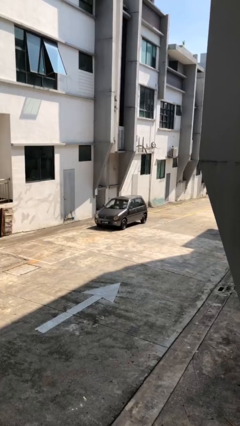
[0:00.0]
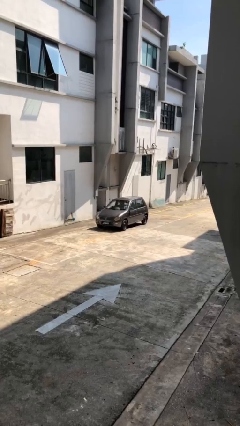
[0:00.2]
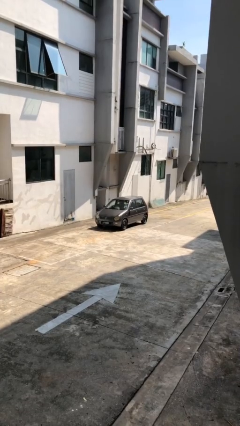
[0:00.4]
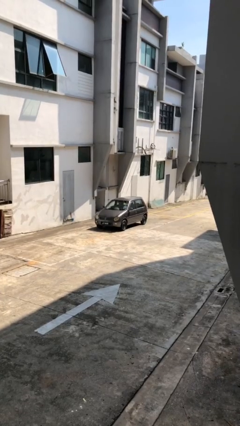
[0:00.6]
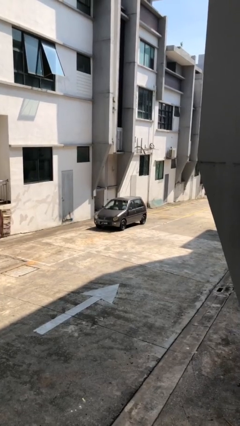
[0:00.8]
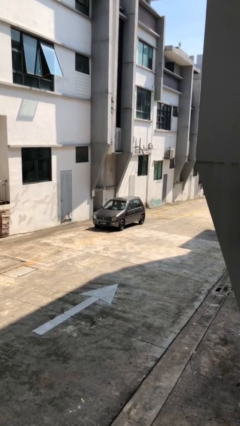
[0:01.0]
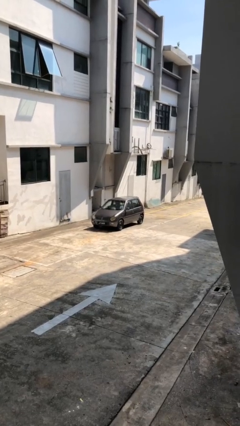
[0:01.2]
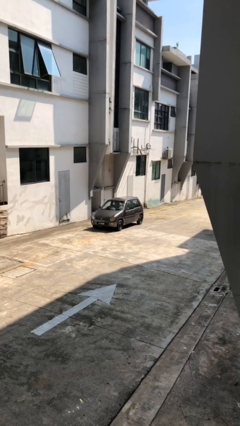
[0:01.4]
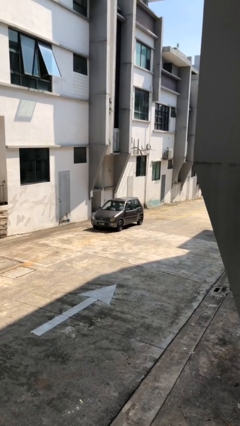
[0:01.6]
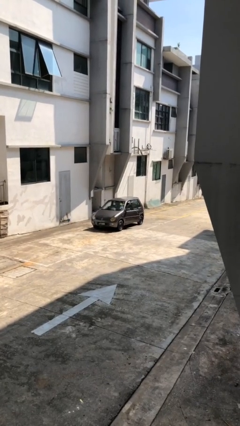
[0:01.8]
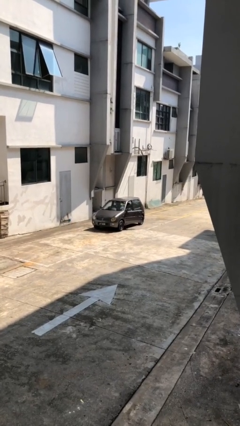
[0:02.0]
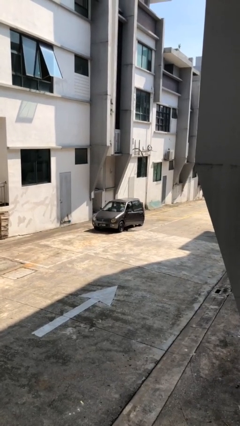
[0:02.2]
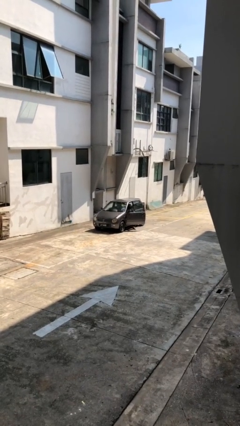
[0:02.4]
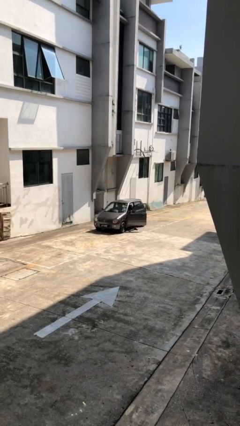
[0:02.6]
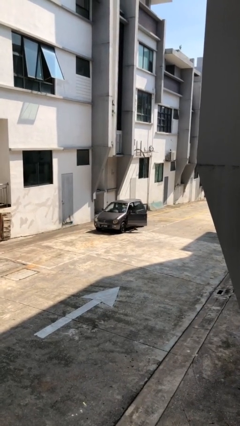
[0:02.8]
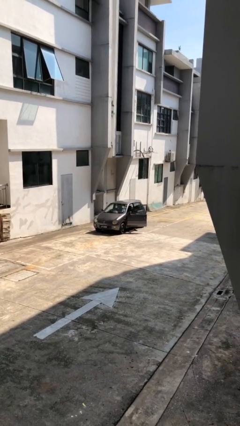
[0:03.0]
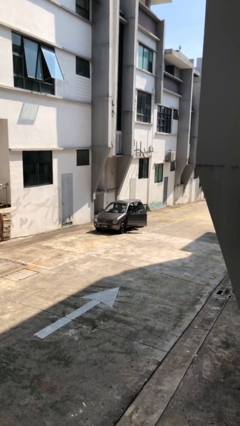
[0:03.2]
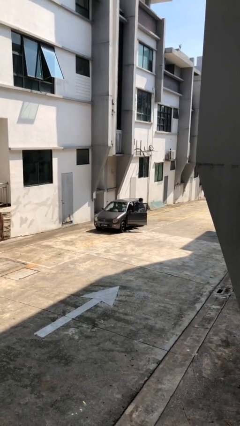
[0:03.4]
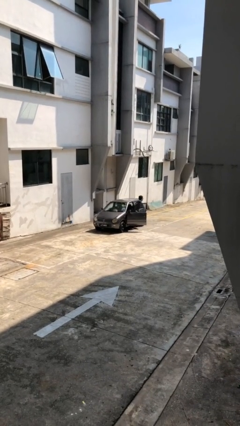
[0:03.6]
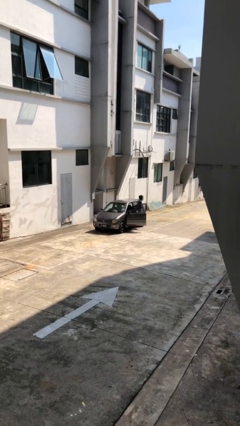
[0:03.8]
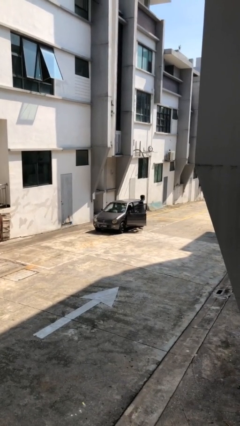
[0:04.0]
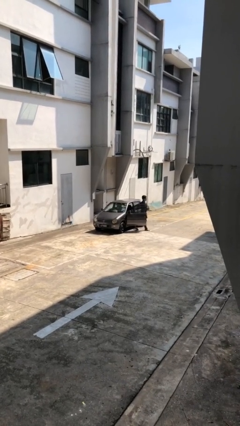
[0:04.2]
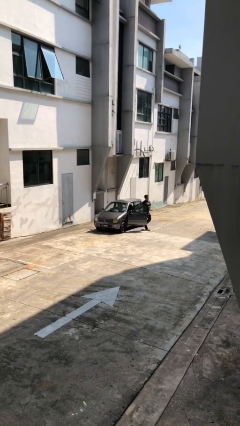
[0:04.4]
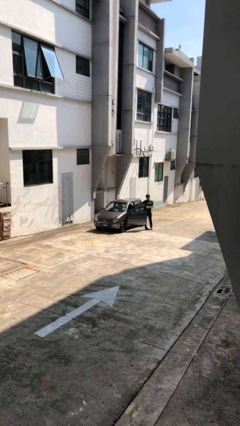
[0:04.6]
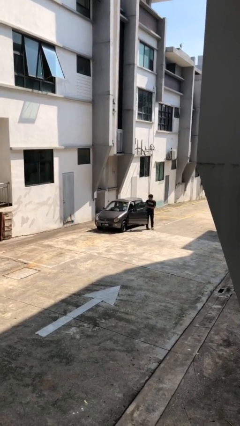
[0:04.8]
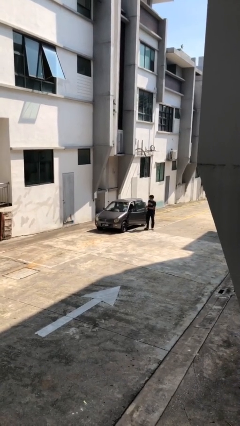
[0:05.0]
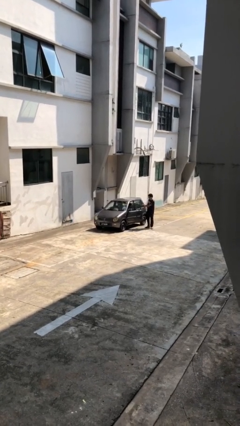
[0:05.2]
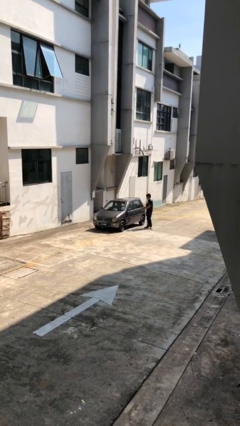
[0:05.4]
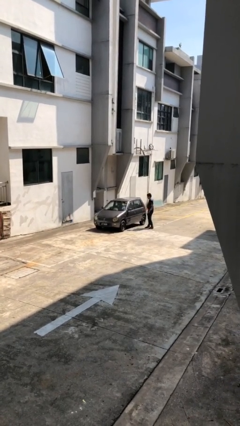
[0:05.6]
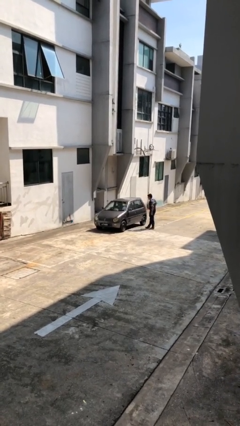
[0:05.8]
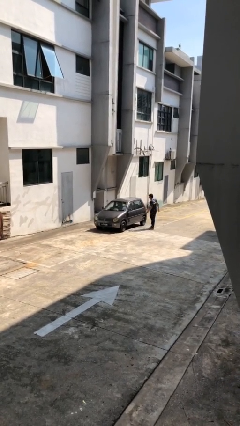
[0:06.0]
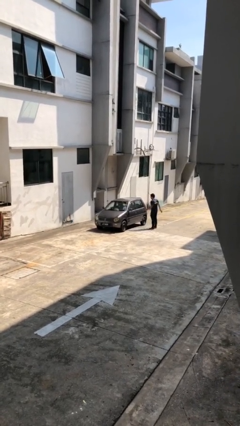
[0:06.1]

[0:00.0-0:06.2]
car drops off person

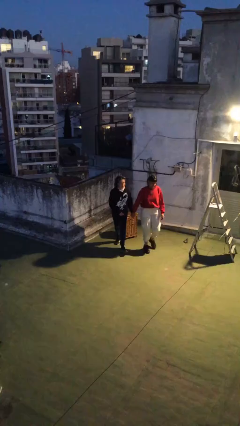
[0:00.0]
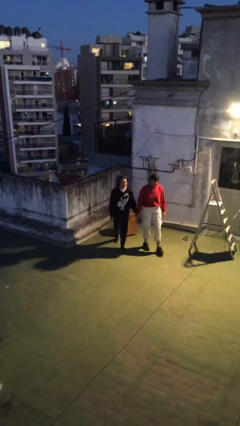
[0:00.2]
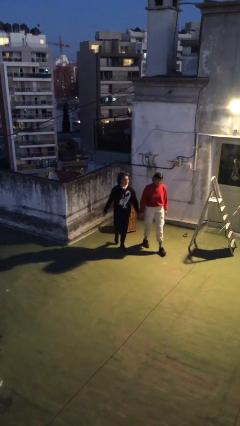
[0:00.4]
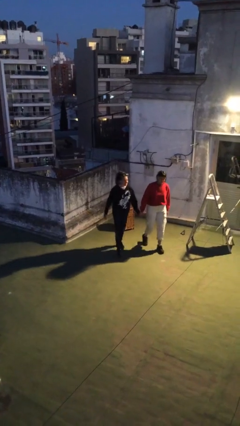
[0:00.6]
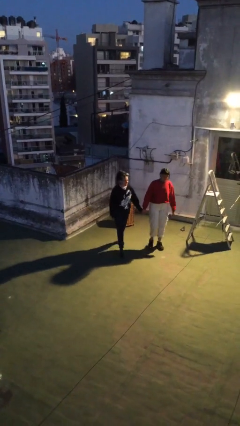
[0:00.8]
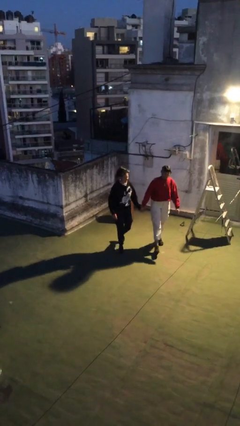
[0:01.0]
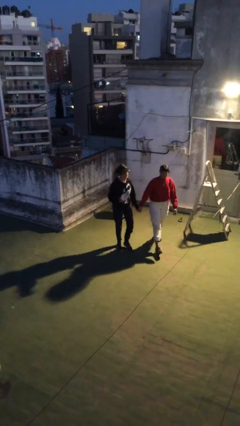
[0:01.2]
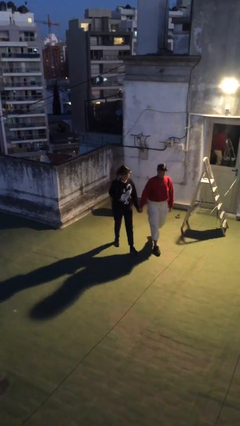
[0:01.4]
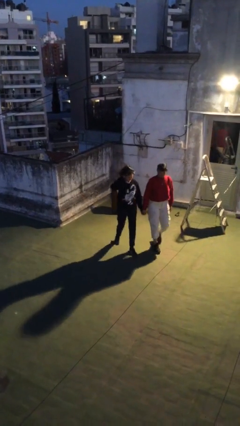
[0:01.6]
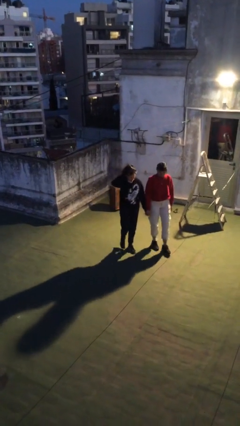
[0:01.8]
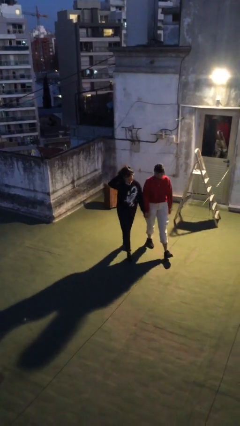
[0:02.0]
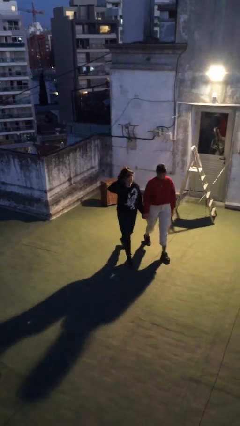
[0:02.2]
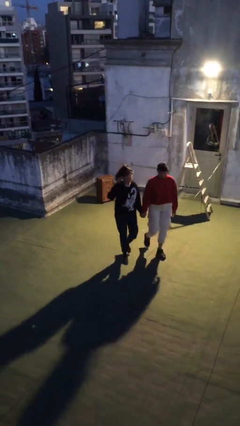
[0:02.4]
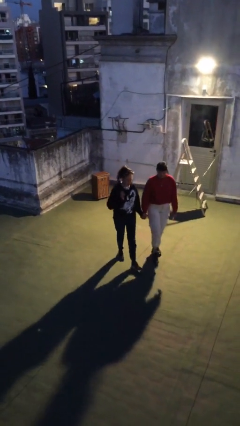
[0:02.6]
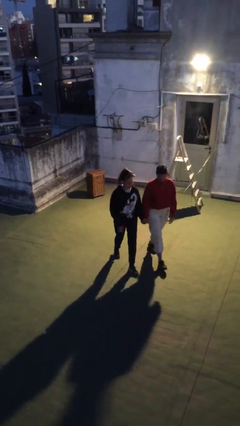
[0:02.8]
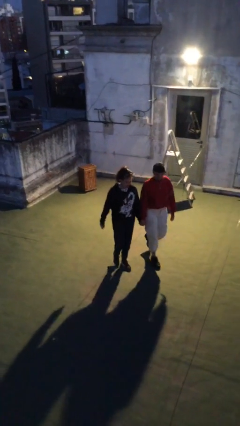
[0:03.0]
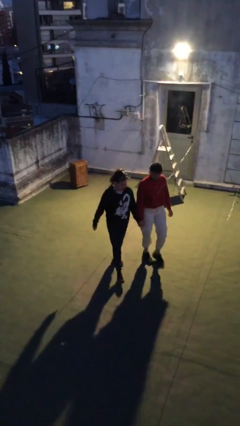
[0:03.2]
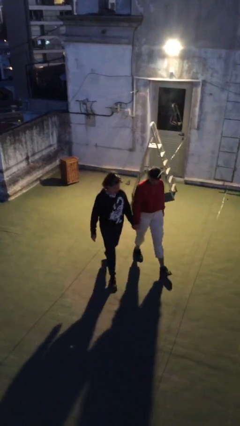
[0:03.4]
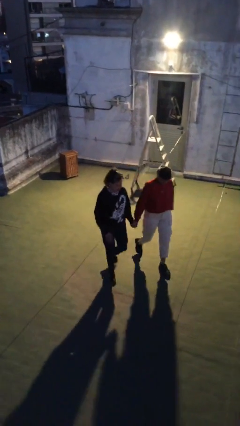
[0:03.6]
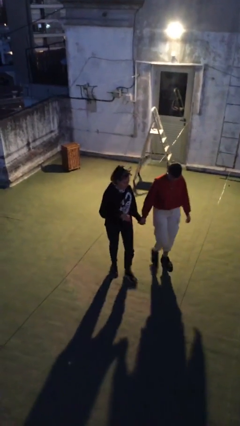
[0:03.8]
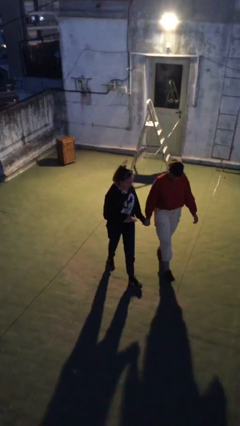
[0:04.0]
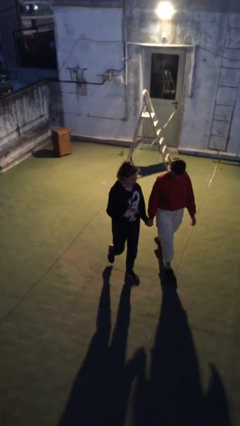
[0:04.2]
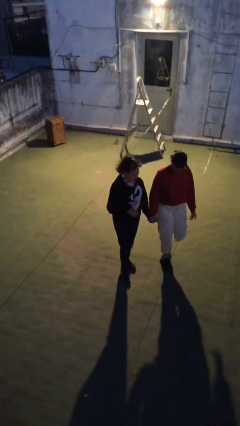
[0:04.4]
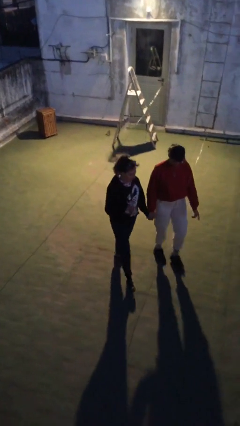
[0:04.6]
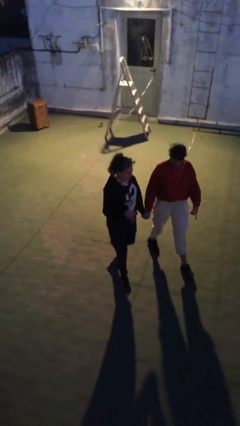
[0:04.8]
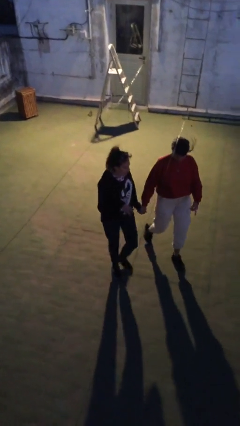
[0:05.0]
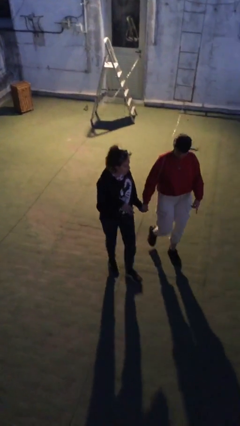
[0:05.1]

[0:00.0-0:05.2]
person holds hand

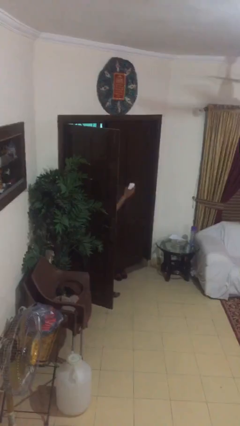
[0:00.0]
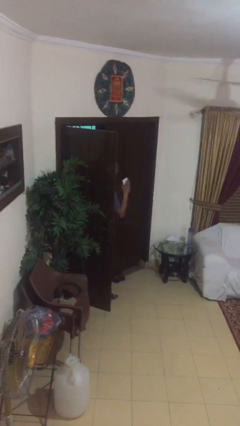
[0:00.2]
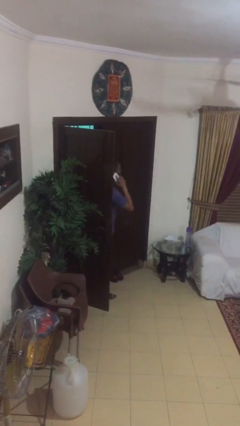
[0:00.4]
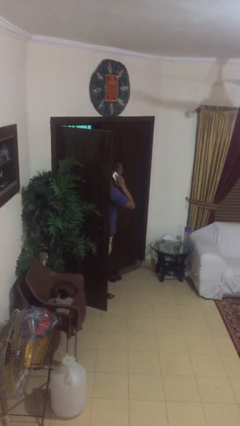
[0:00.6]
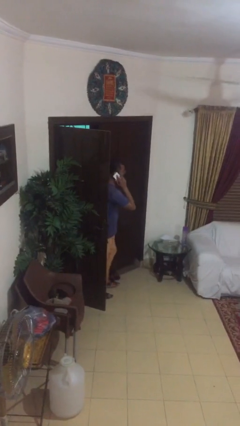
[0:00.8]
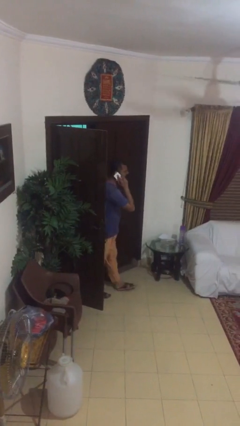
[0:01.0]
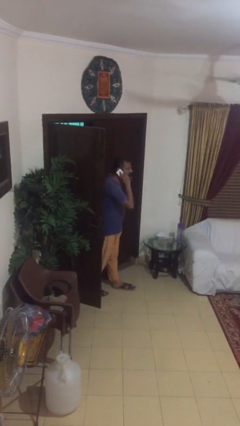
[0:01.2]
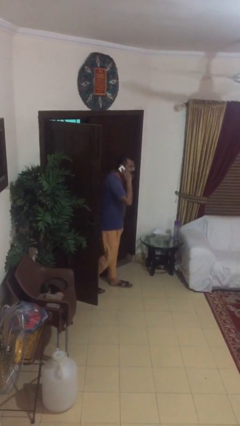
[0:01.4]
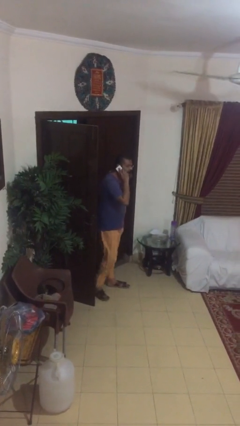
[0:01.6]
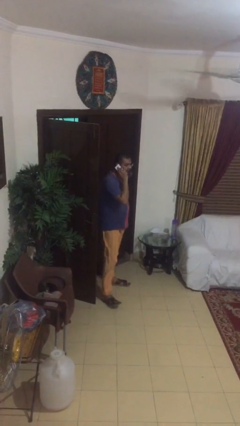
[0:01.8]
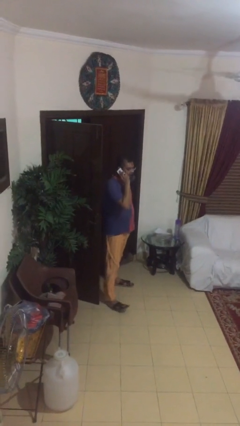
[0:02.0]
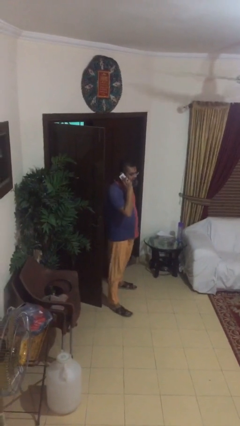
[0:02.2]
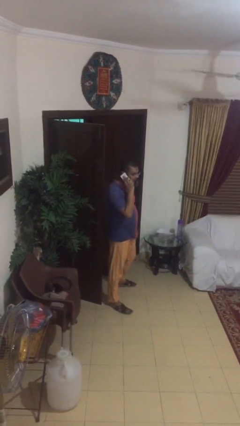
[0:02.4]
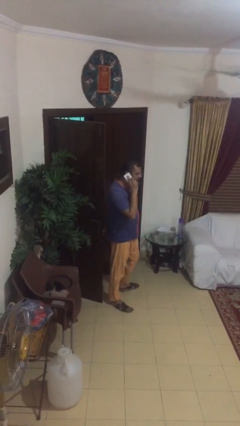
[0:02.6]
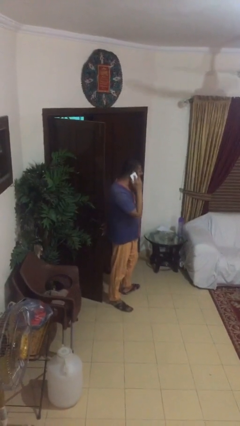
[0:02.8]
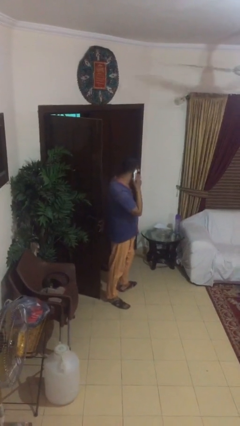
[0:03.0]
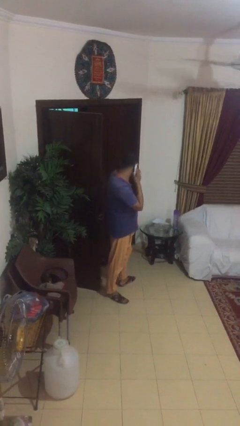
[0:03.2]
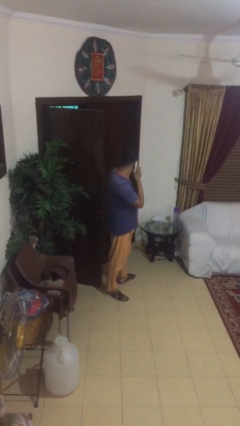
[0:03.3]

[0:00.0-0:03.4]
person enters scene through structure

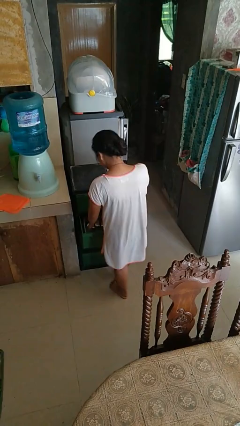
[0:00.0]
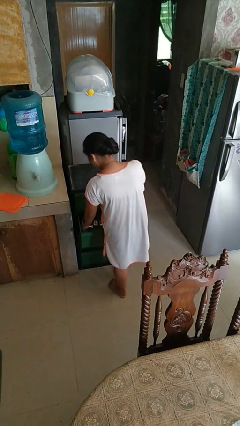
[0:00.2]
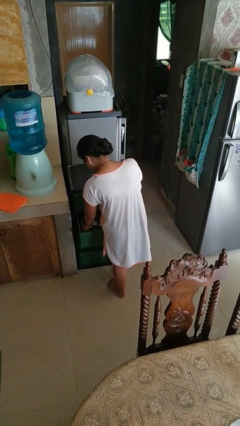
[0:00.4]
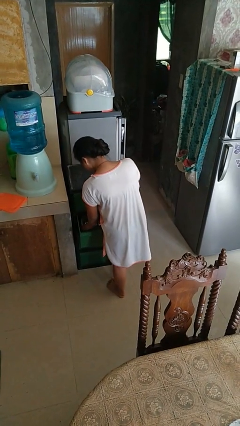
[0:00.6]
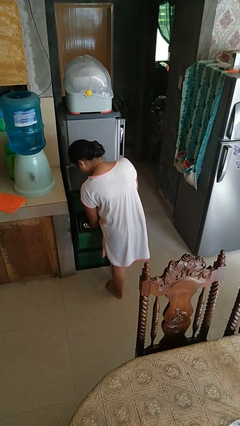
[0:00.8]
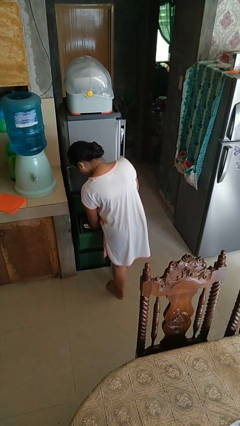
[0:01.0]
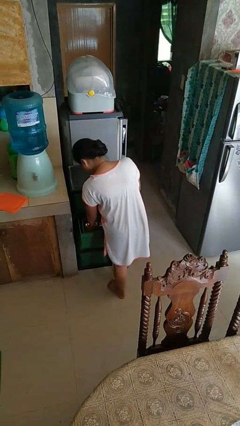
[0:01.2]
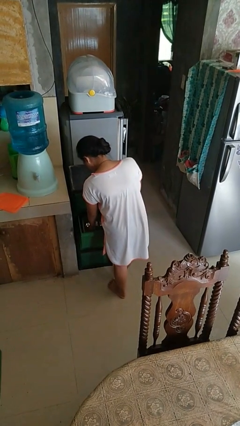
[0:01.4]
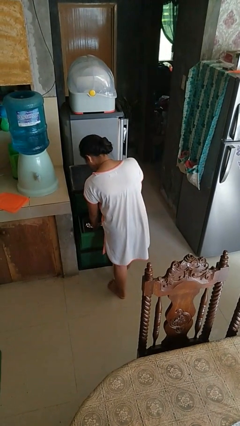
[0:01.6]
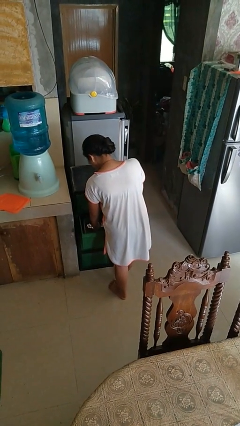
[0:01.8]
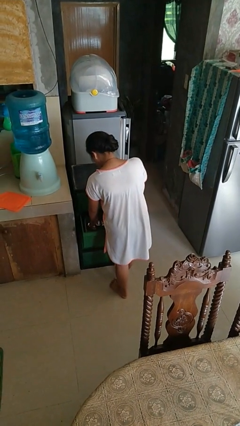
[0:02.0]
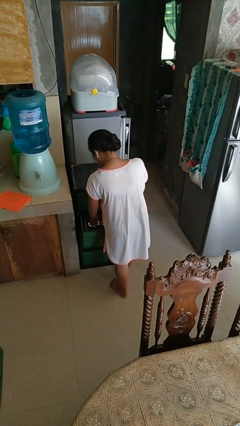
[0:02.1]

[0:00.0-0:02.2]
person searches in kitchen drawer

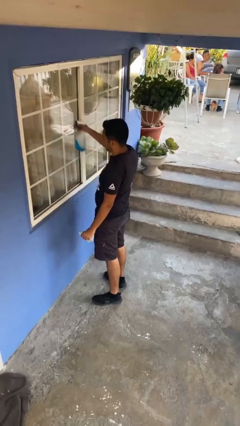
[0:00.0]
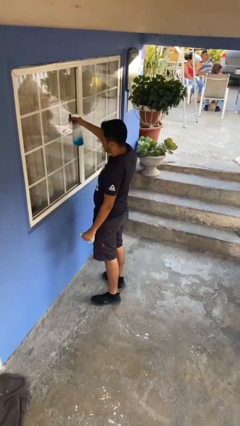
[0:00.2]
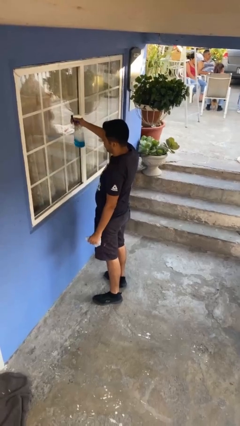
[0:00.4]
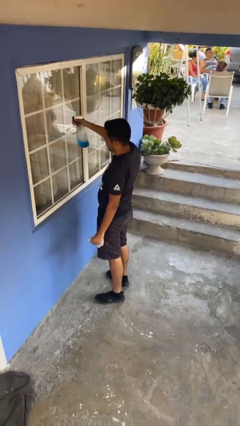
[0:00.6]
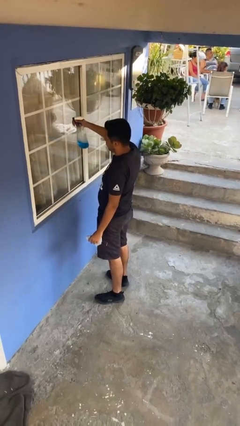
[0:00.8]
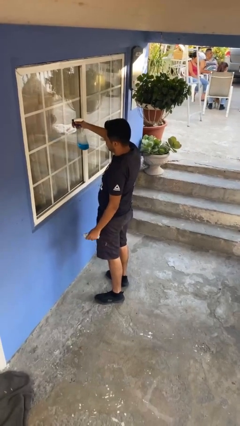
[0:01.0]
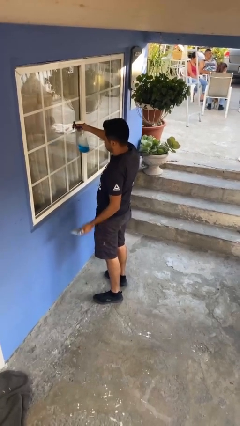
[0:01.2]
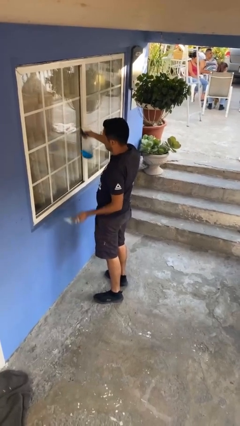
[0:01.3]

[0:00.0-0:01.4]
person sprays from bottle
